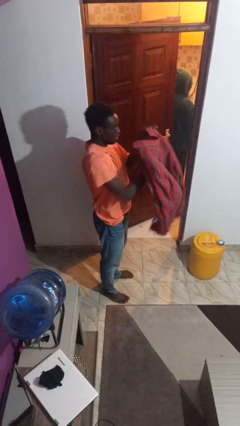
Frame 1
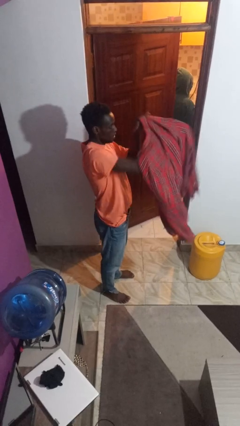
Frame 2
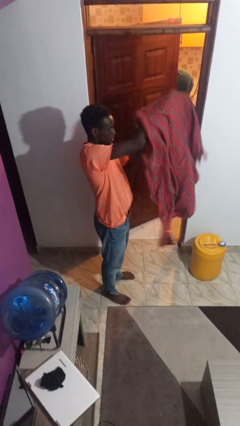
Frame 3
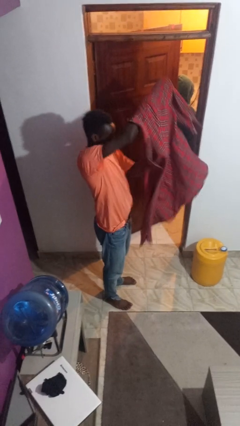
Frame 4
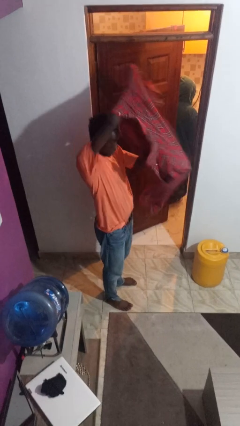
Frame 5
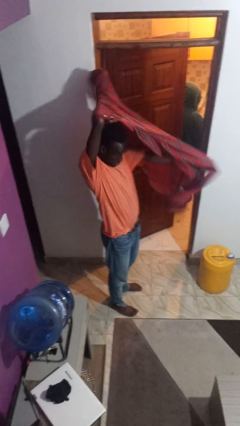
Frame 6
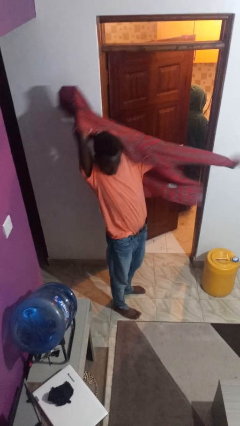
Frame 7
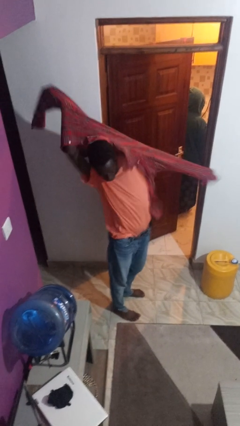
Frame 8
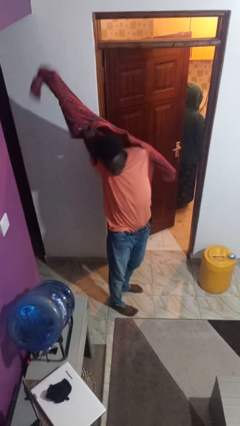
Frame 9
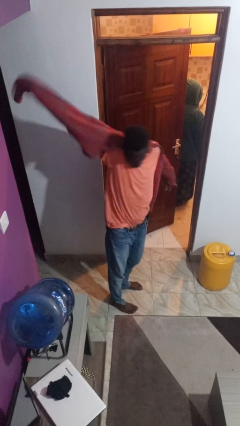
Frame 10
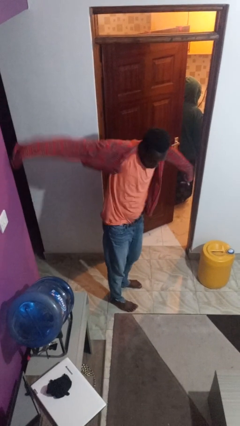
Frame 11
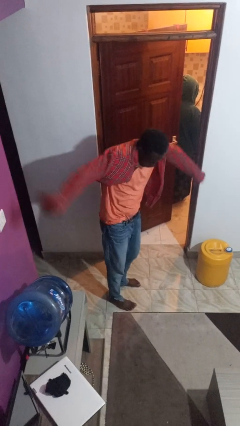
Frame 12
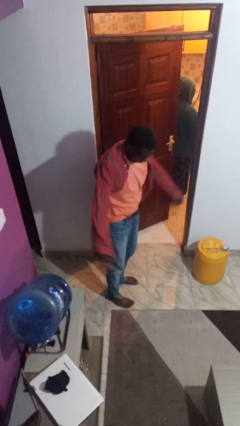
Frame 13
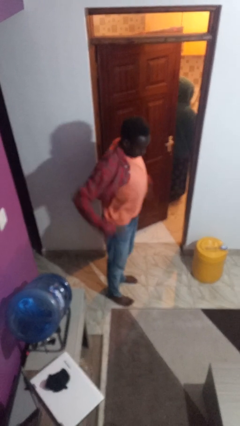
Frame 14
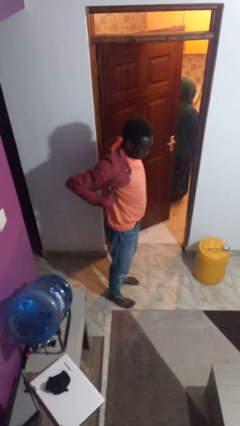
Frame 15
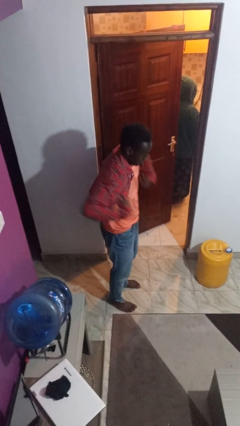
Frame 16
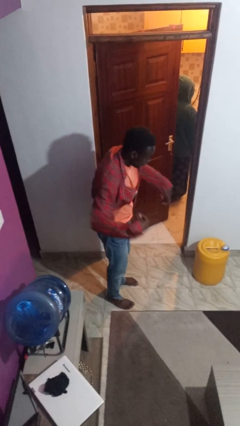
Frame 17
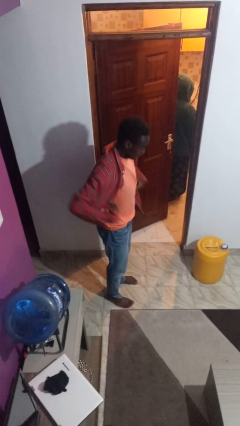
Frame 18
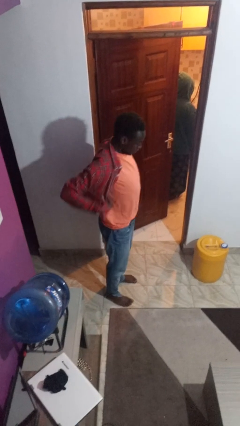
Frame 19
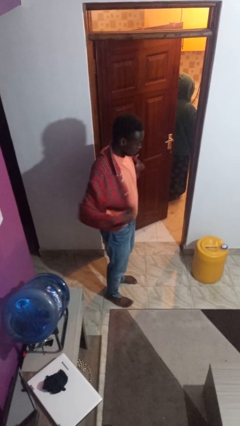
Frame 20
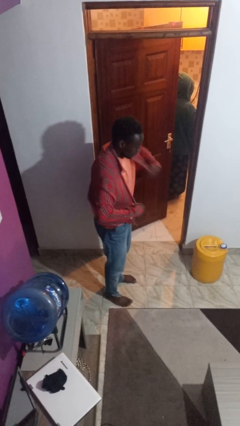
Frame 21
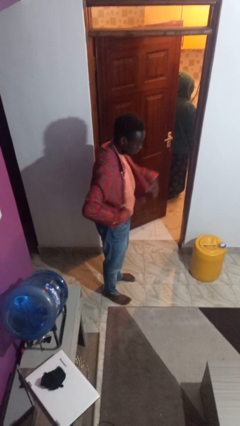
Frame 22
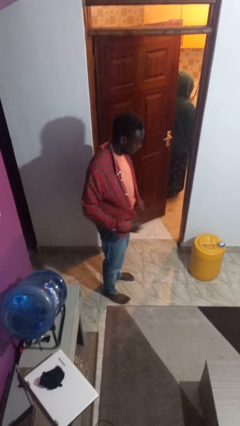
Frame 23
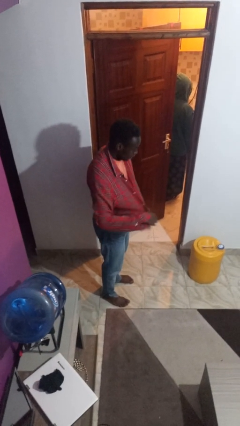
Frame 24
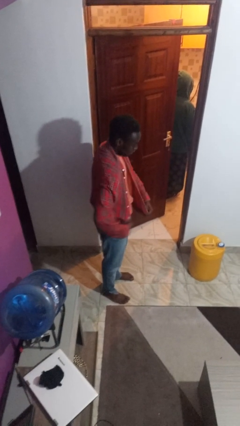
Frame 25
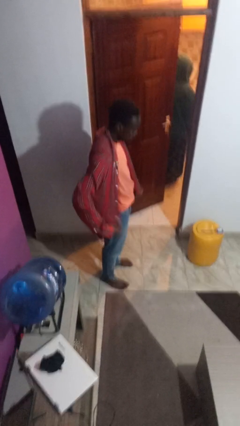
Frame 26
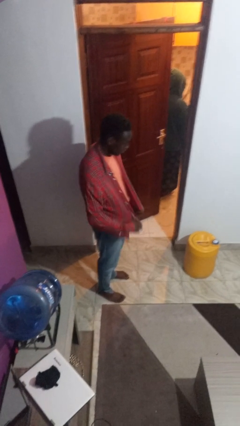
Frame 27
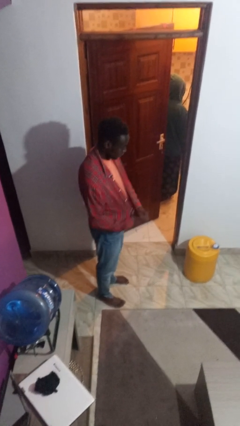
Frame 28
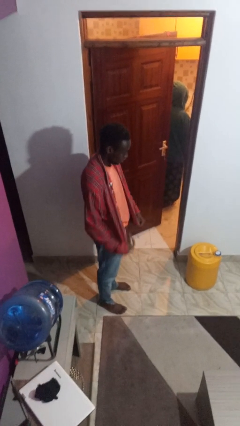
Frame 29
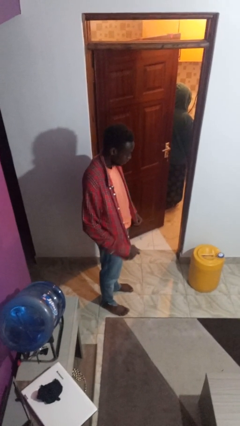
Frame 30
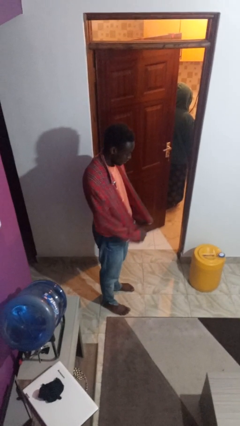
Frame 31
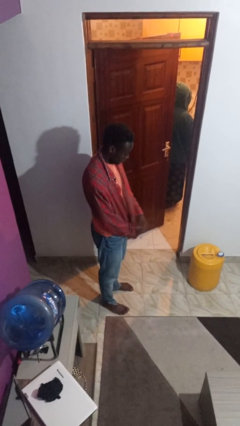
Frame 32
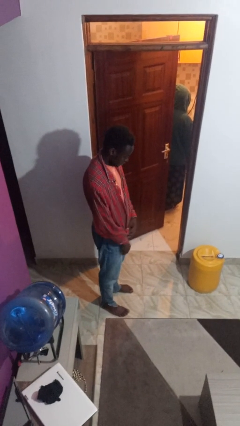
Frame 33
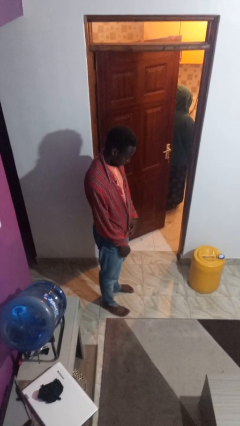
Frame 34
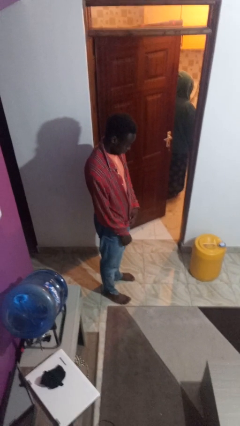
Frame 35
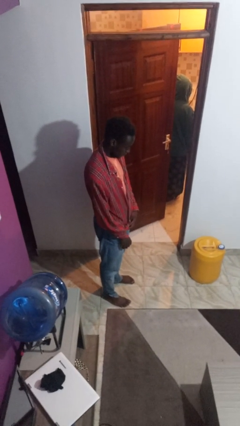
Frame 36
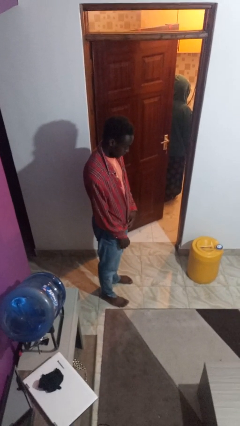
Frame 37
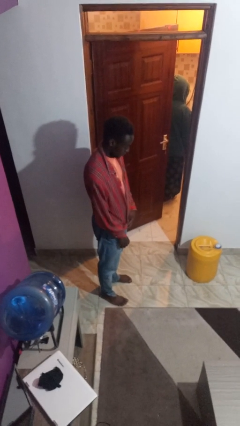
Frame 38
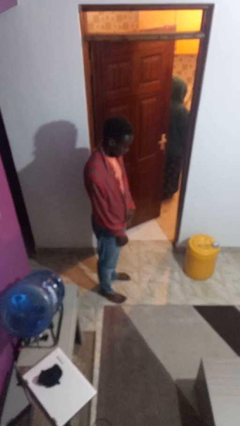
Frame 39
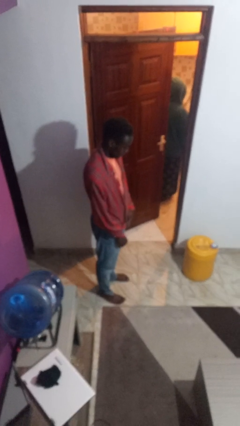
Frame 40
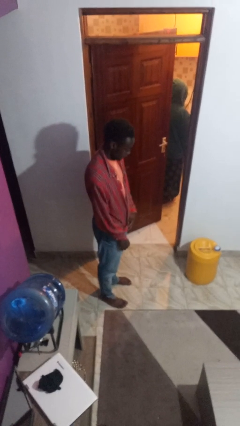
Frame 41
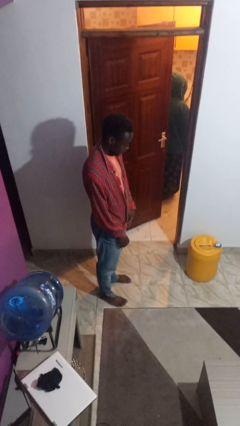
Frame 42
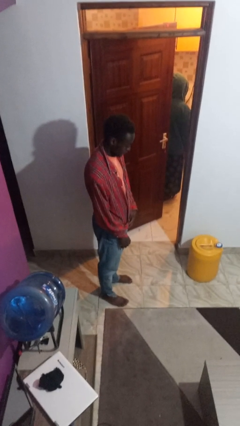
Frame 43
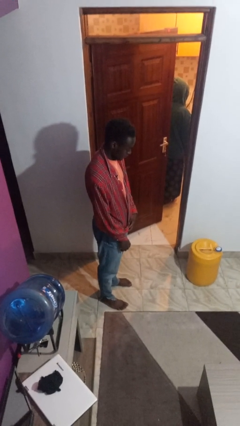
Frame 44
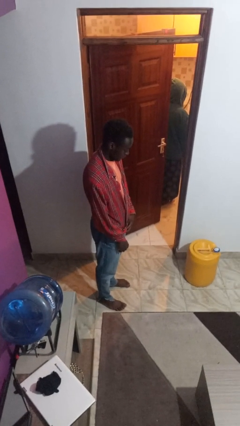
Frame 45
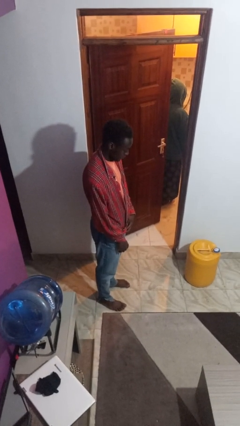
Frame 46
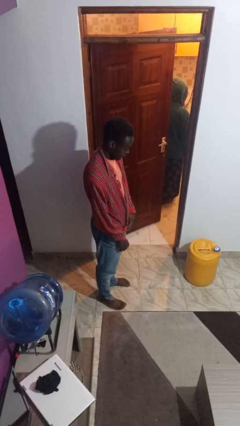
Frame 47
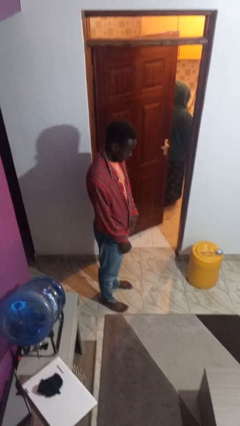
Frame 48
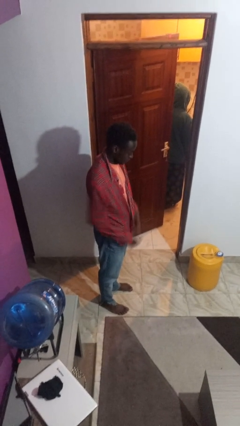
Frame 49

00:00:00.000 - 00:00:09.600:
person puts on shirt

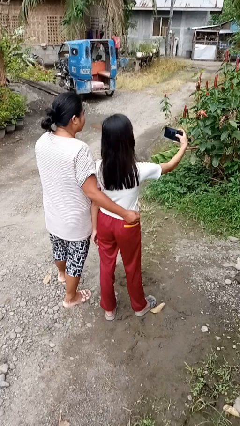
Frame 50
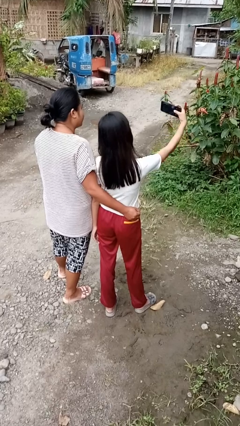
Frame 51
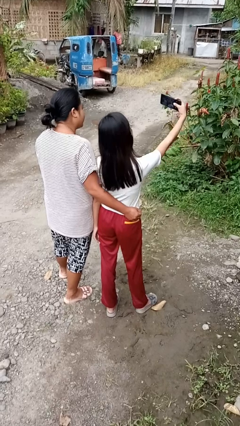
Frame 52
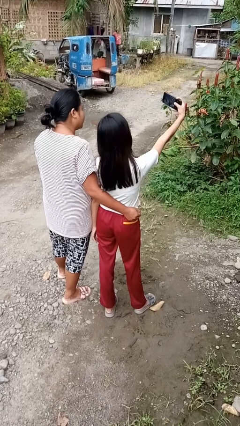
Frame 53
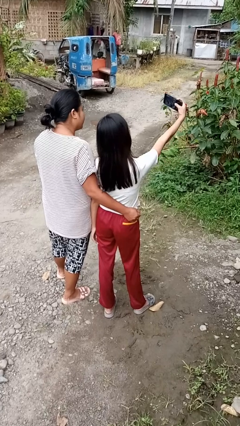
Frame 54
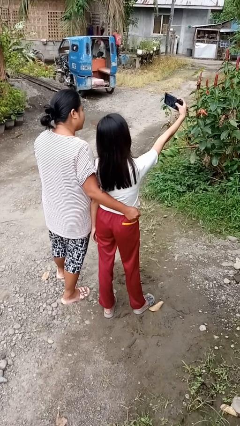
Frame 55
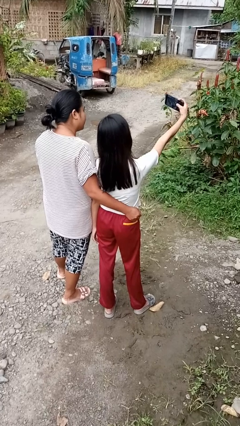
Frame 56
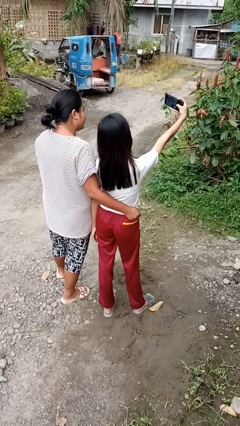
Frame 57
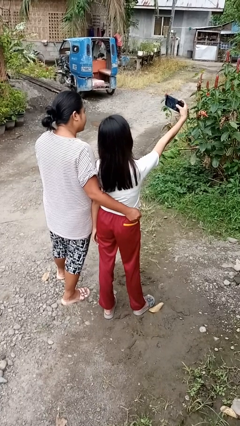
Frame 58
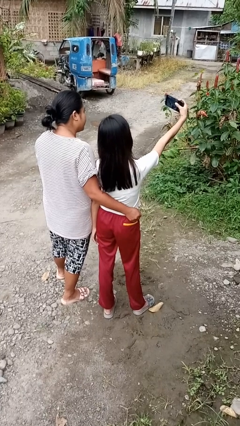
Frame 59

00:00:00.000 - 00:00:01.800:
person takes selfie with person

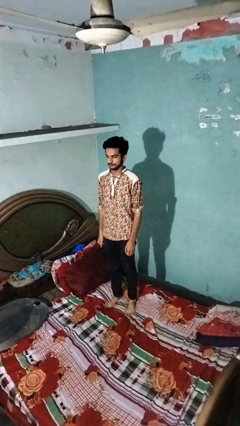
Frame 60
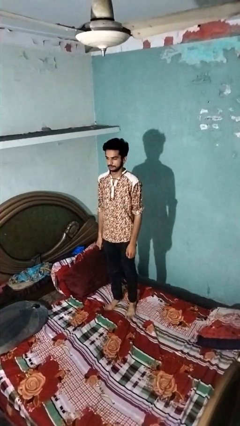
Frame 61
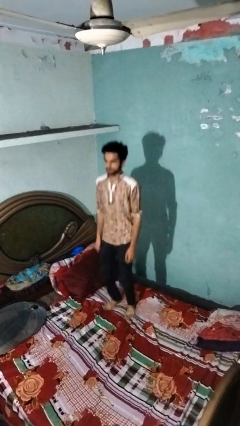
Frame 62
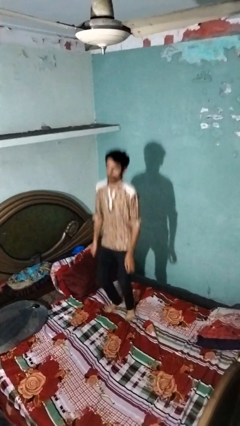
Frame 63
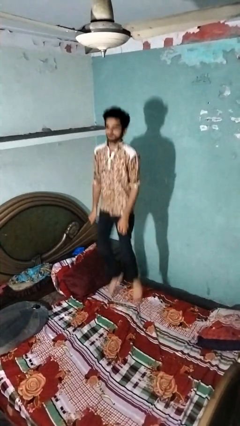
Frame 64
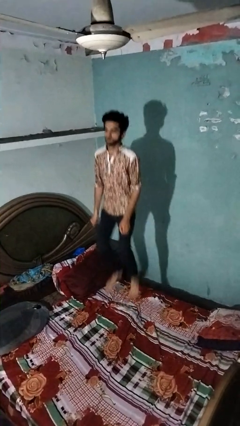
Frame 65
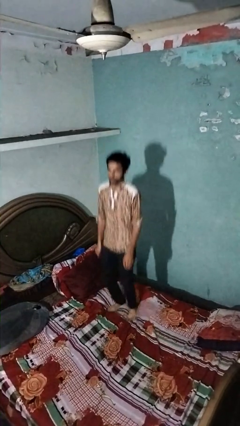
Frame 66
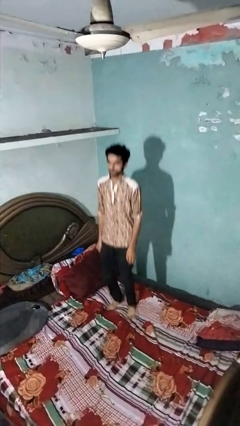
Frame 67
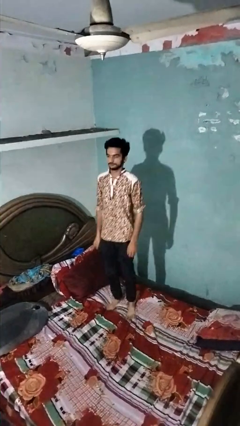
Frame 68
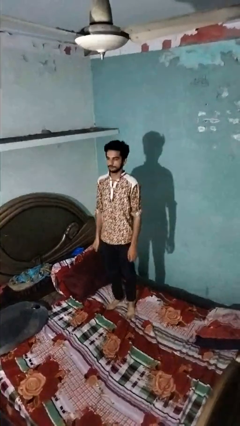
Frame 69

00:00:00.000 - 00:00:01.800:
person jumps on bed

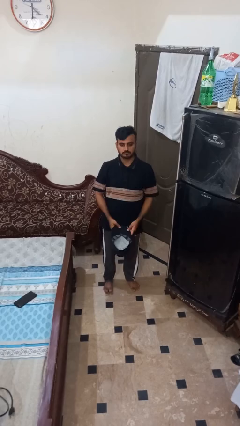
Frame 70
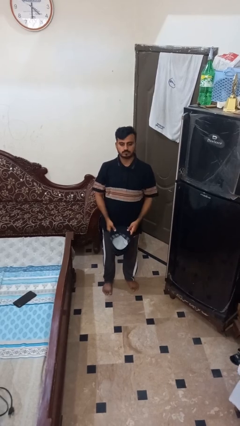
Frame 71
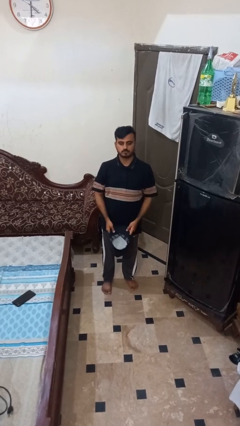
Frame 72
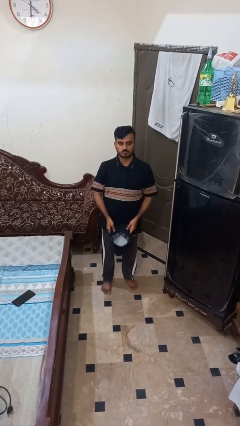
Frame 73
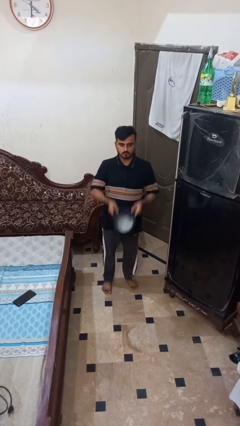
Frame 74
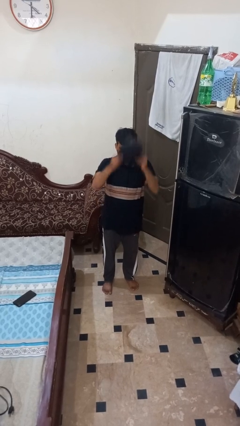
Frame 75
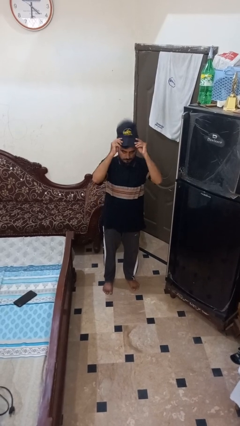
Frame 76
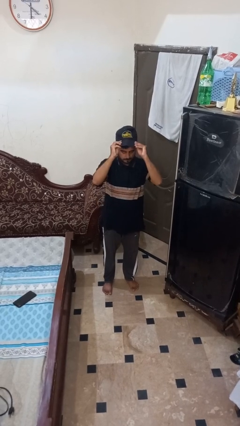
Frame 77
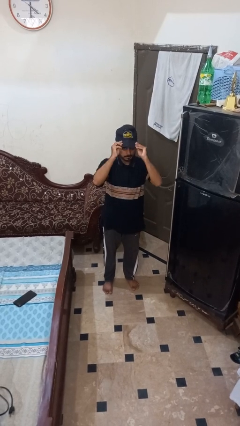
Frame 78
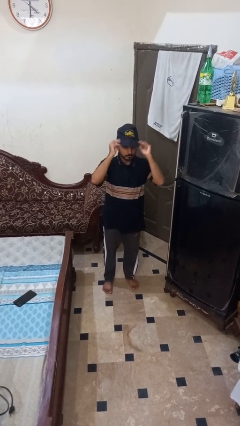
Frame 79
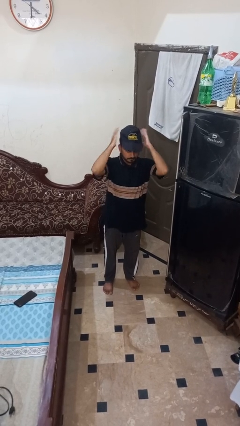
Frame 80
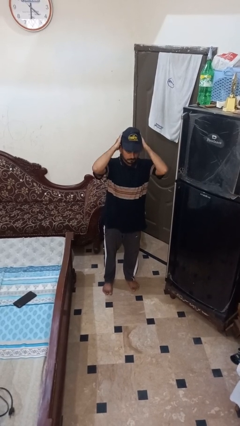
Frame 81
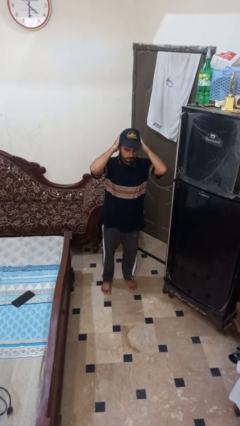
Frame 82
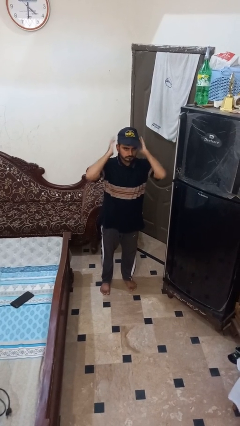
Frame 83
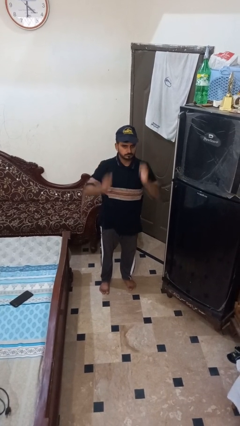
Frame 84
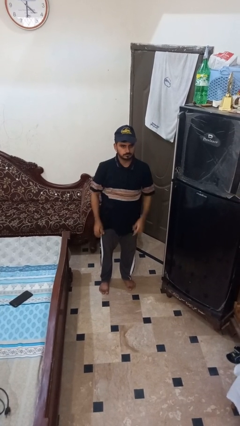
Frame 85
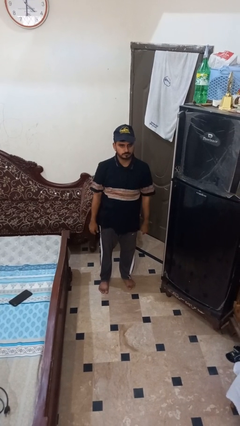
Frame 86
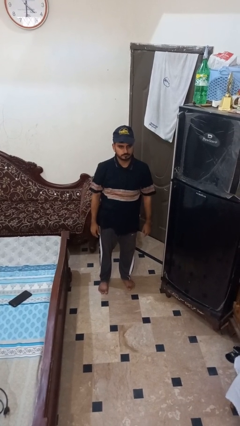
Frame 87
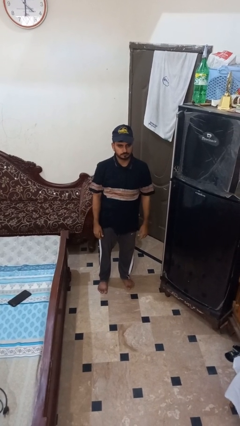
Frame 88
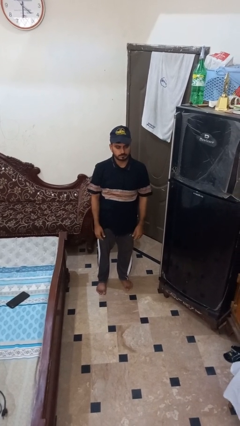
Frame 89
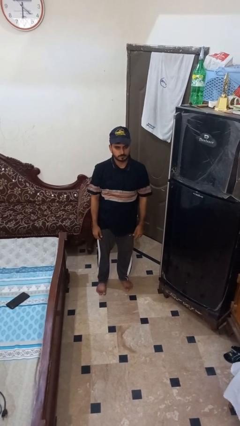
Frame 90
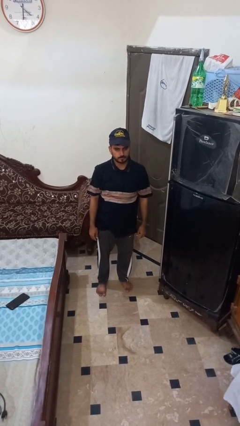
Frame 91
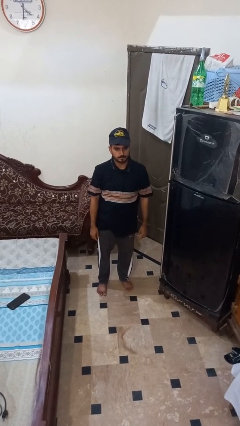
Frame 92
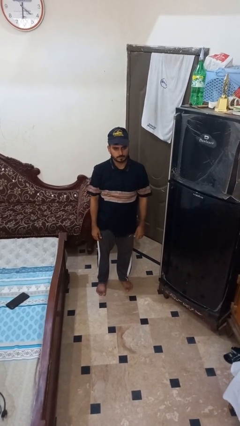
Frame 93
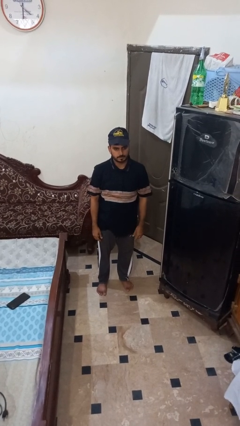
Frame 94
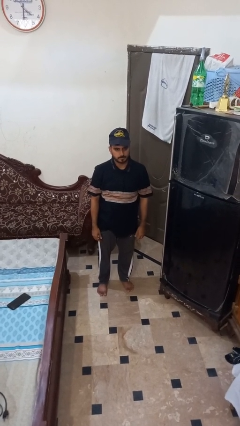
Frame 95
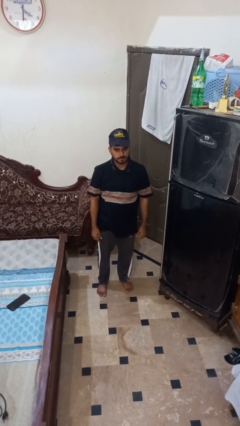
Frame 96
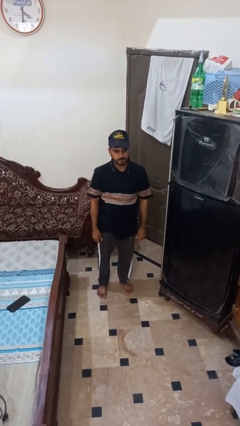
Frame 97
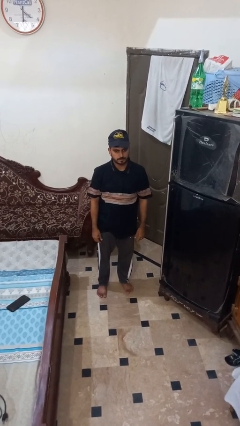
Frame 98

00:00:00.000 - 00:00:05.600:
person puts on hat
